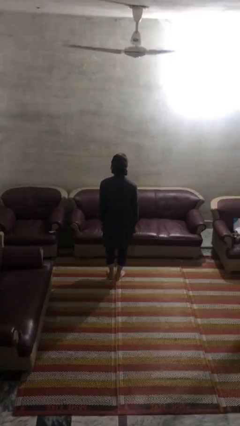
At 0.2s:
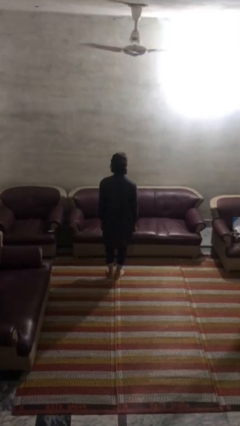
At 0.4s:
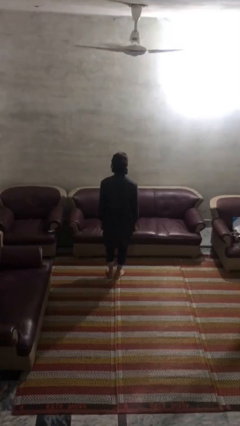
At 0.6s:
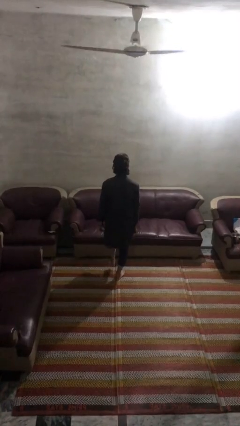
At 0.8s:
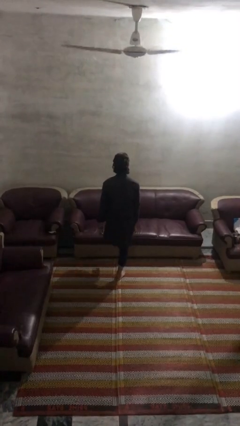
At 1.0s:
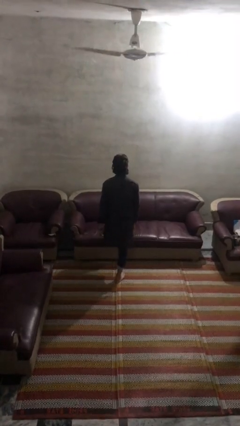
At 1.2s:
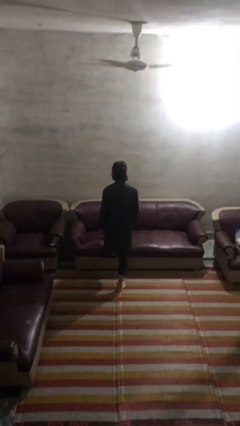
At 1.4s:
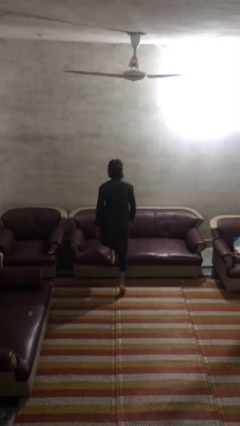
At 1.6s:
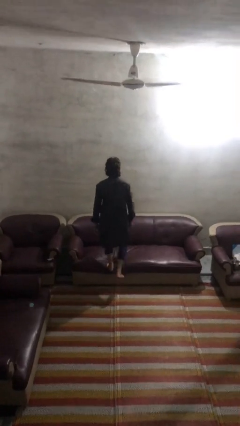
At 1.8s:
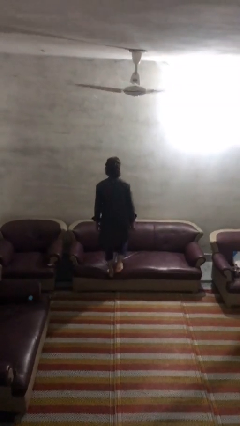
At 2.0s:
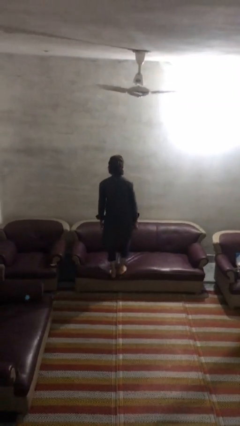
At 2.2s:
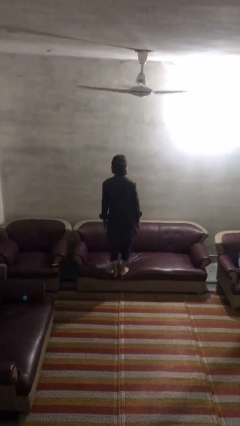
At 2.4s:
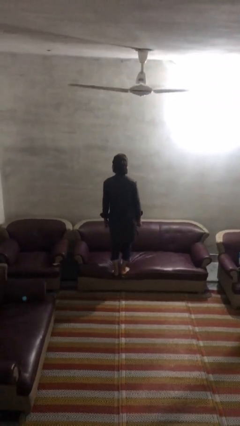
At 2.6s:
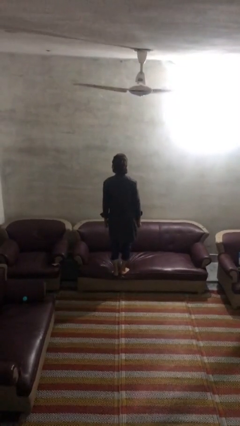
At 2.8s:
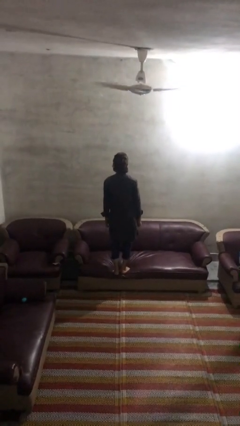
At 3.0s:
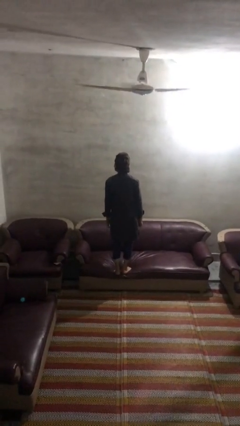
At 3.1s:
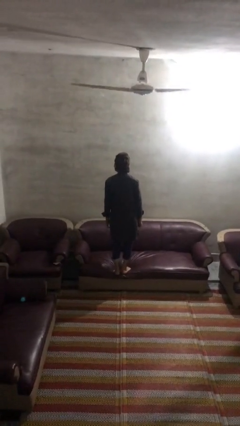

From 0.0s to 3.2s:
person climbs on couch

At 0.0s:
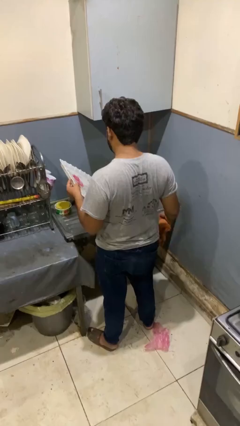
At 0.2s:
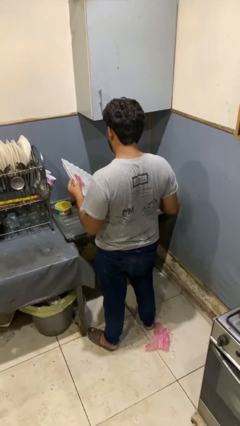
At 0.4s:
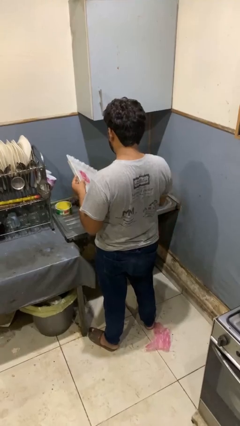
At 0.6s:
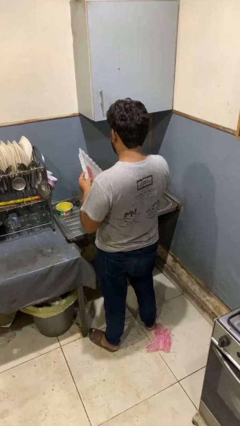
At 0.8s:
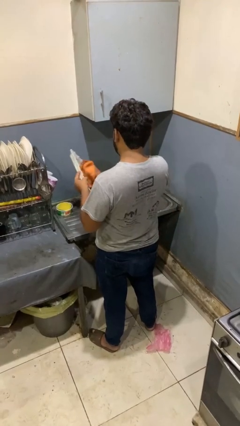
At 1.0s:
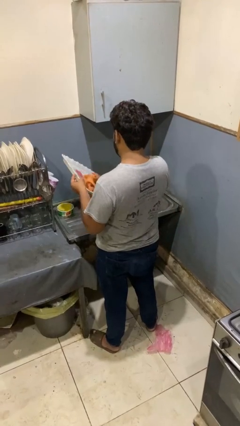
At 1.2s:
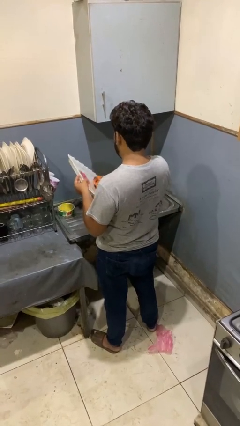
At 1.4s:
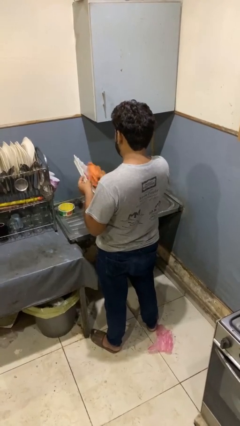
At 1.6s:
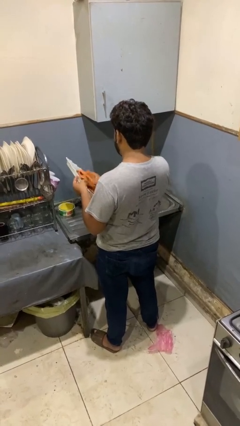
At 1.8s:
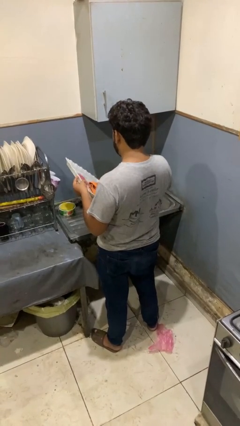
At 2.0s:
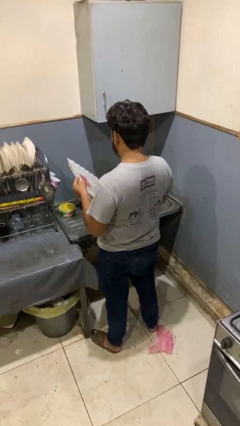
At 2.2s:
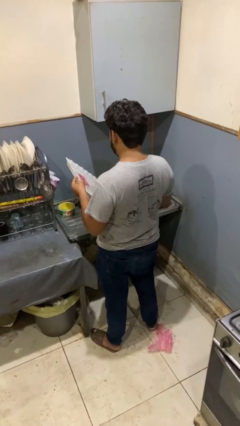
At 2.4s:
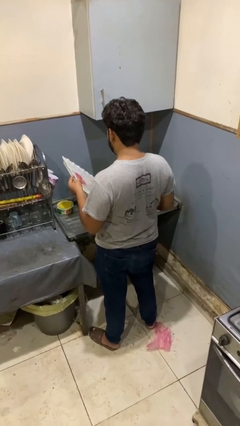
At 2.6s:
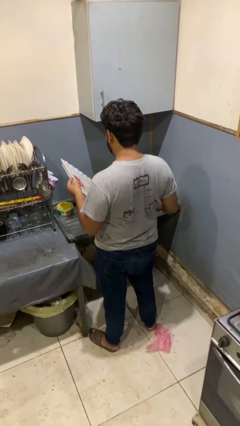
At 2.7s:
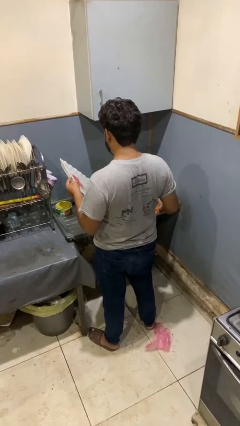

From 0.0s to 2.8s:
person dries dish

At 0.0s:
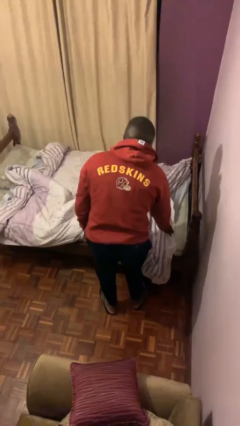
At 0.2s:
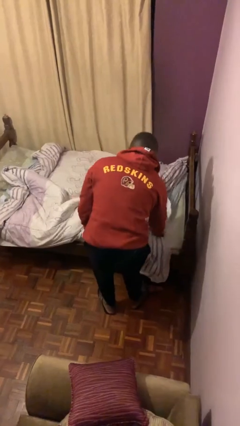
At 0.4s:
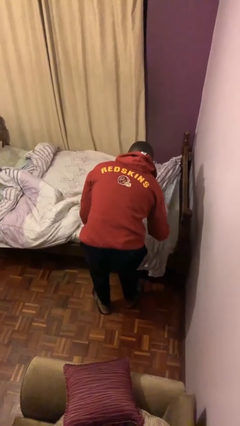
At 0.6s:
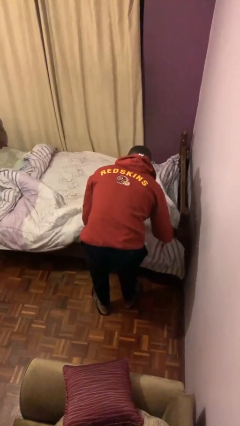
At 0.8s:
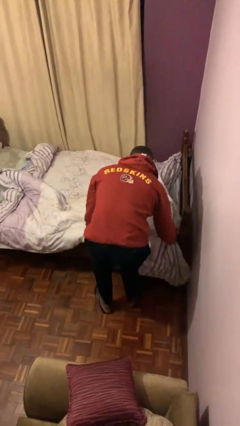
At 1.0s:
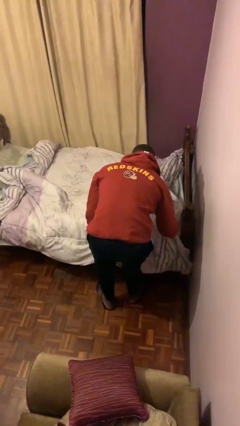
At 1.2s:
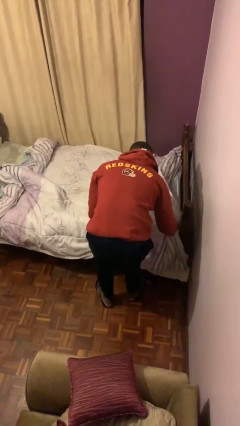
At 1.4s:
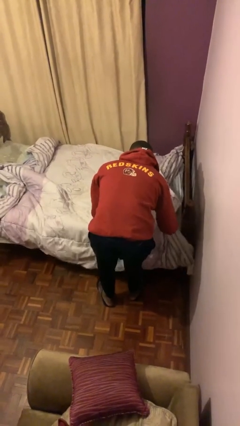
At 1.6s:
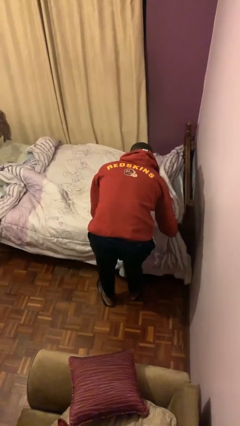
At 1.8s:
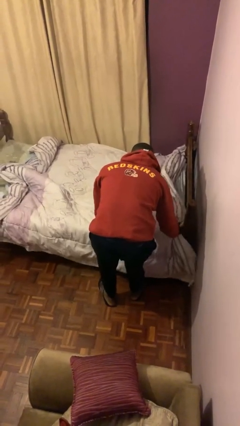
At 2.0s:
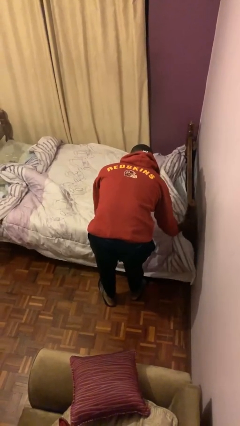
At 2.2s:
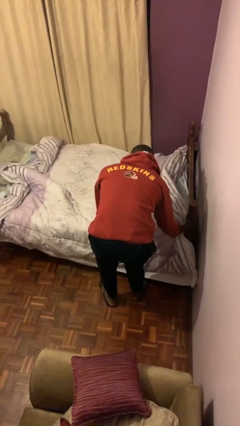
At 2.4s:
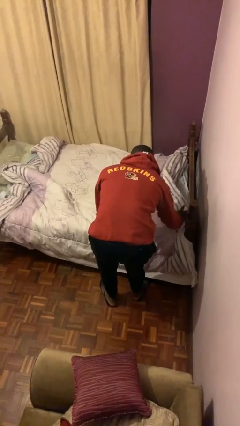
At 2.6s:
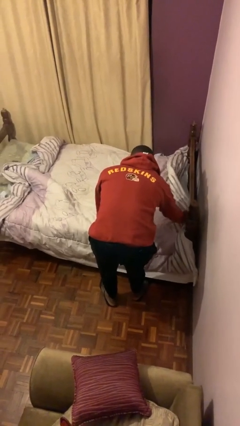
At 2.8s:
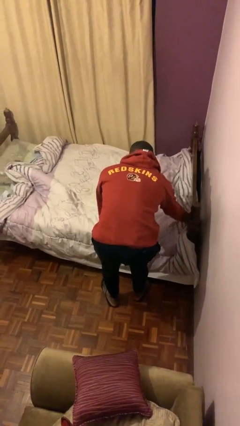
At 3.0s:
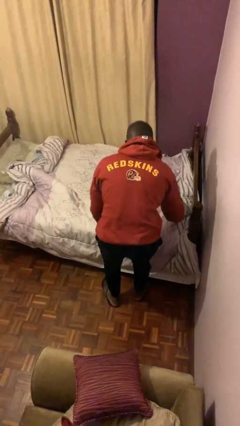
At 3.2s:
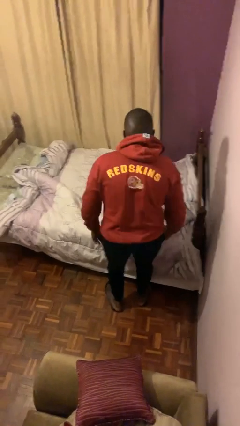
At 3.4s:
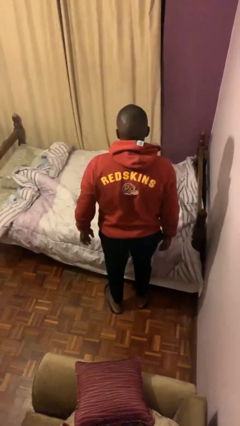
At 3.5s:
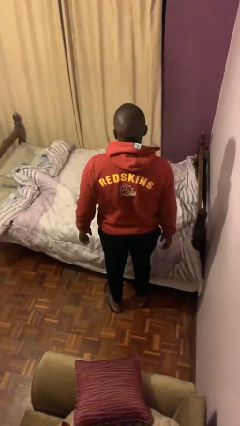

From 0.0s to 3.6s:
person makes bed

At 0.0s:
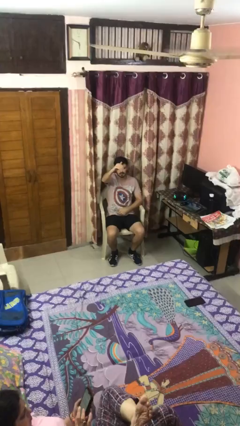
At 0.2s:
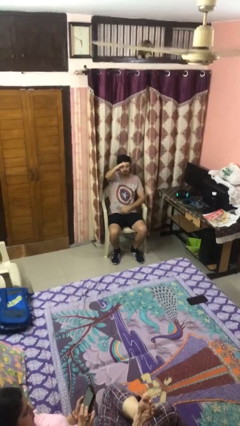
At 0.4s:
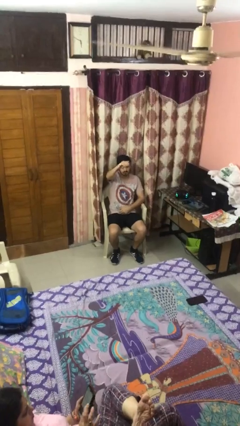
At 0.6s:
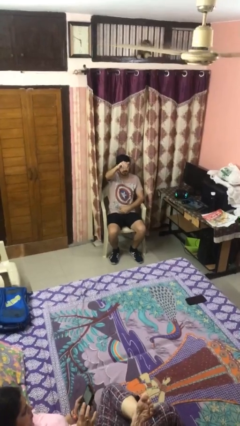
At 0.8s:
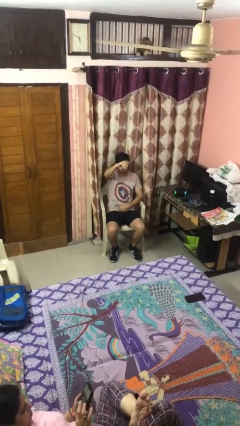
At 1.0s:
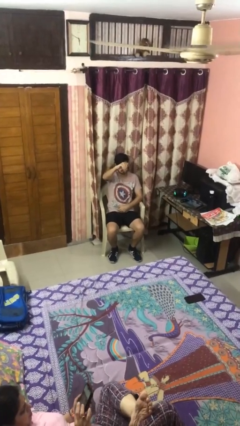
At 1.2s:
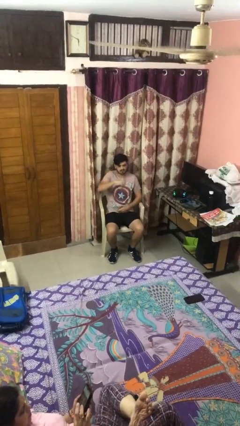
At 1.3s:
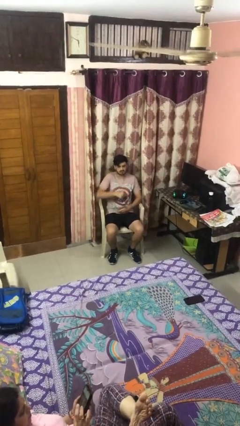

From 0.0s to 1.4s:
person gestures come here

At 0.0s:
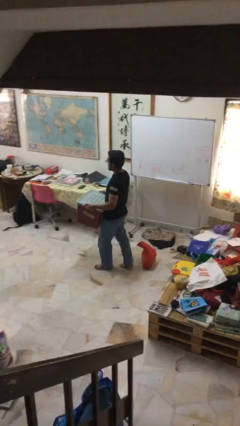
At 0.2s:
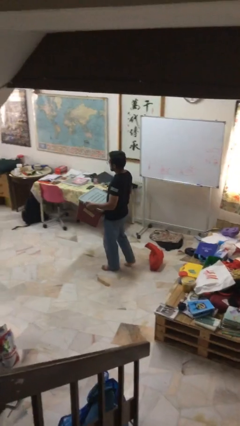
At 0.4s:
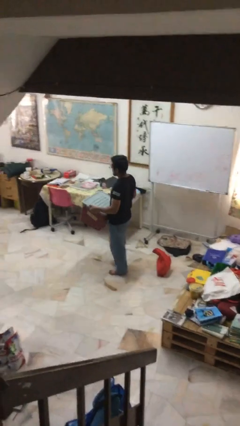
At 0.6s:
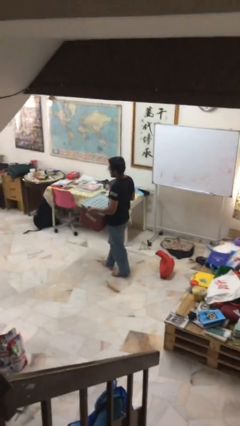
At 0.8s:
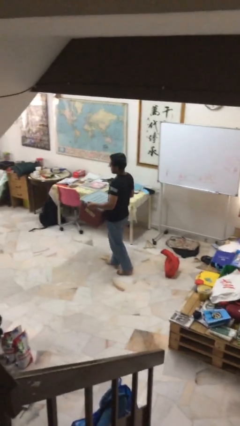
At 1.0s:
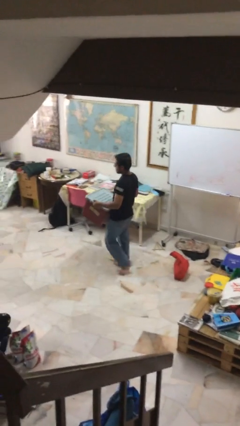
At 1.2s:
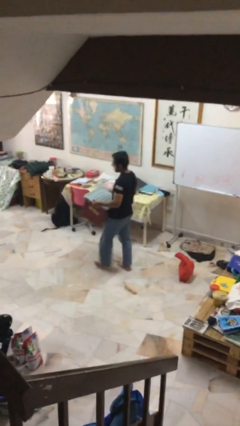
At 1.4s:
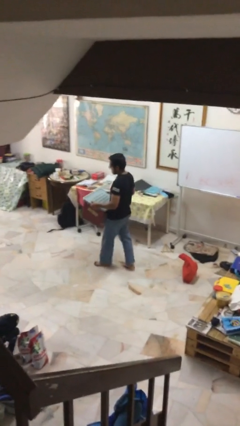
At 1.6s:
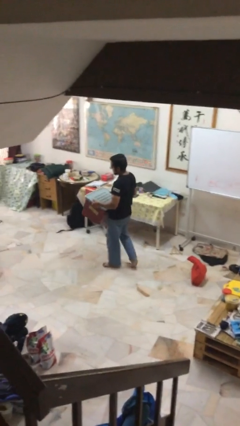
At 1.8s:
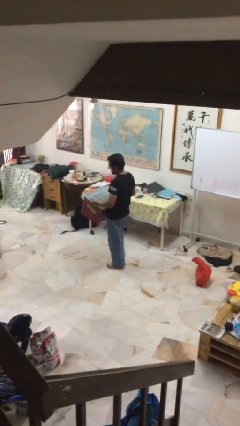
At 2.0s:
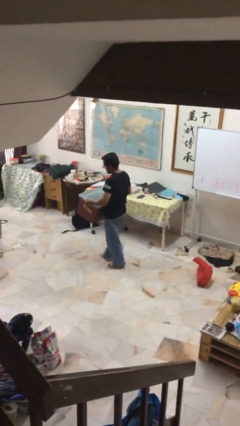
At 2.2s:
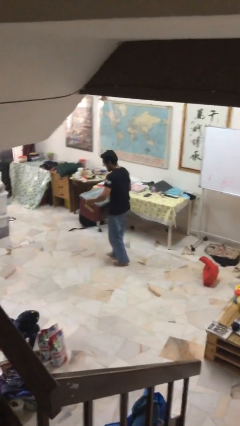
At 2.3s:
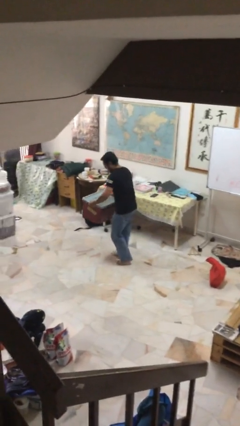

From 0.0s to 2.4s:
person carries heavy object

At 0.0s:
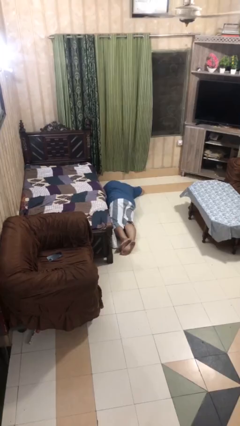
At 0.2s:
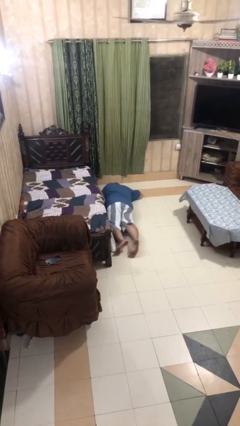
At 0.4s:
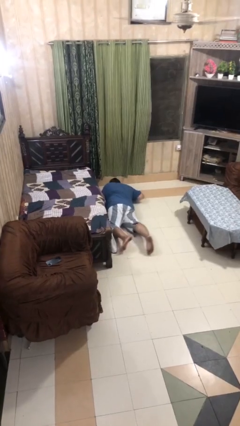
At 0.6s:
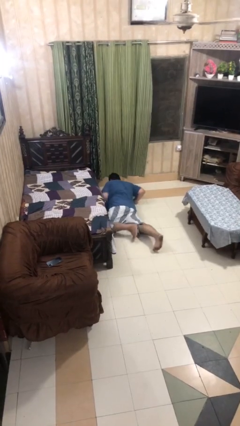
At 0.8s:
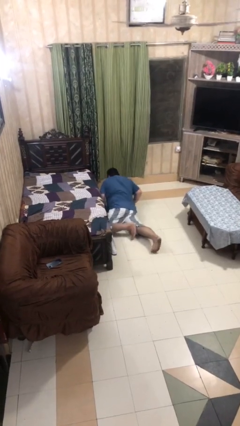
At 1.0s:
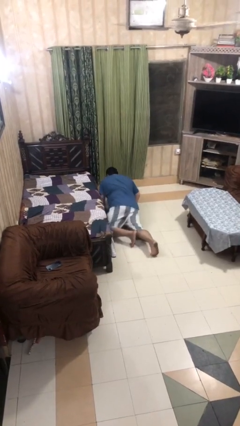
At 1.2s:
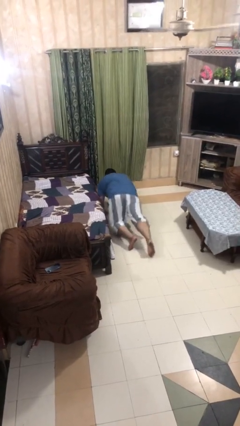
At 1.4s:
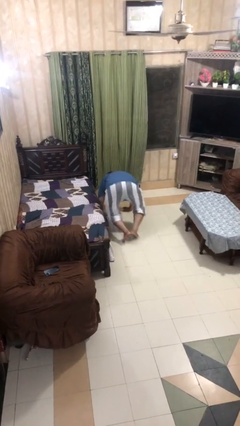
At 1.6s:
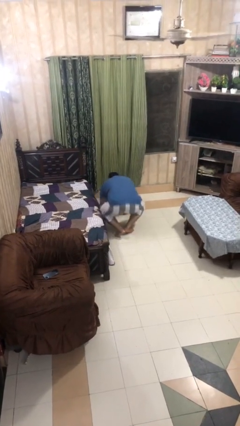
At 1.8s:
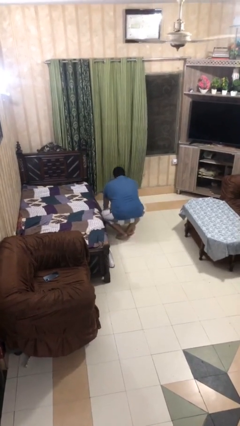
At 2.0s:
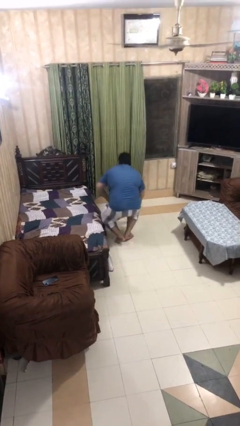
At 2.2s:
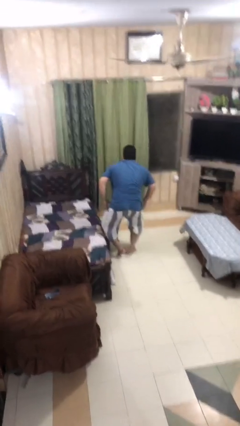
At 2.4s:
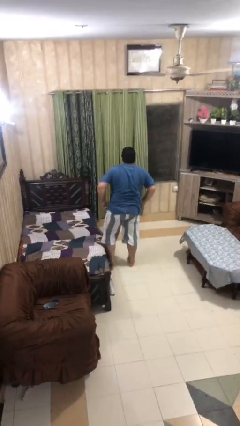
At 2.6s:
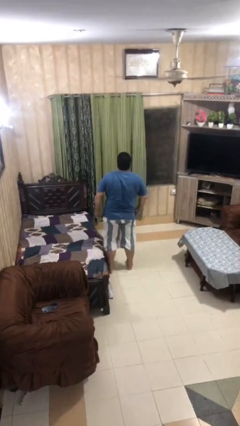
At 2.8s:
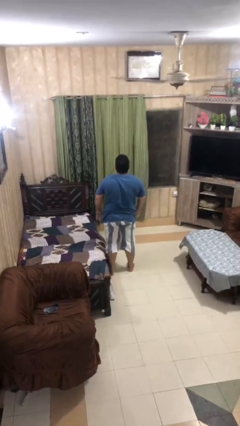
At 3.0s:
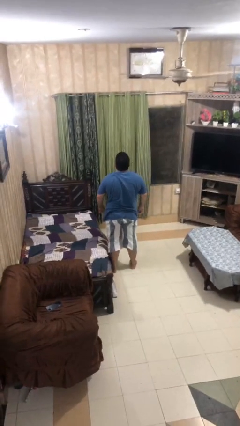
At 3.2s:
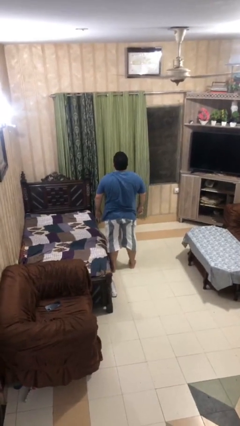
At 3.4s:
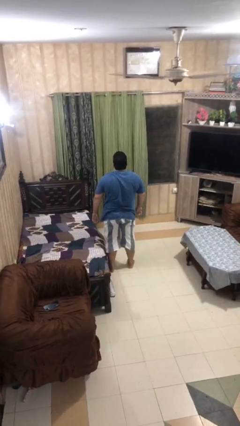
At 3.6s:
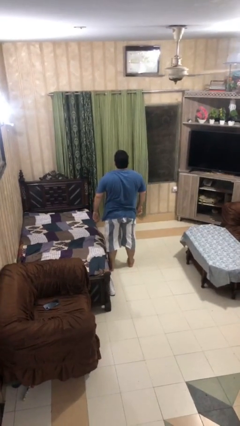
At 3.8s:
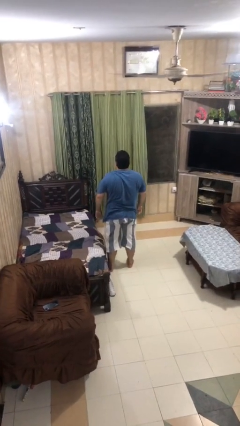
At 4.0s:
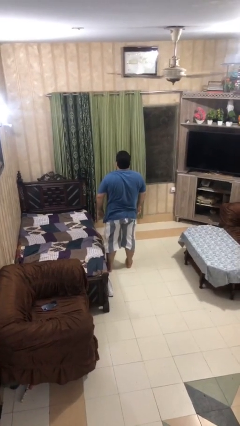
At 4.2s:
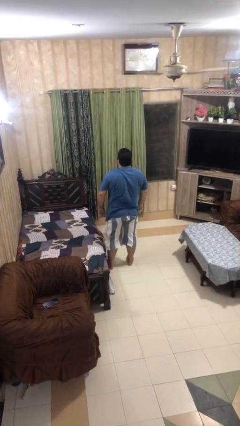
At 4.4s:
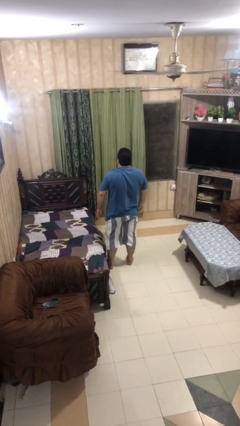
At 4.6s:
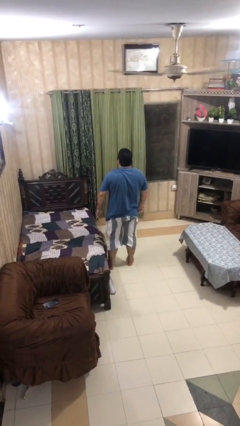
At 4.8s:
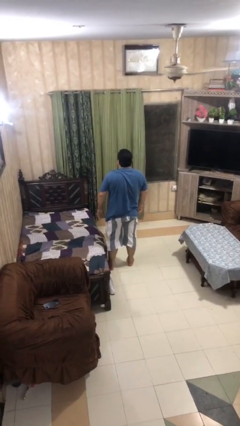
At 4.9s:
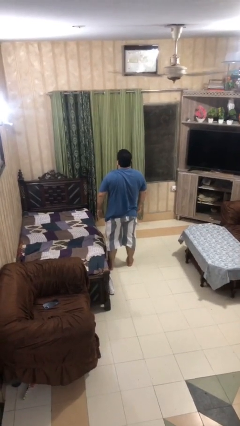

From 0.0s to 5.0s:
person stands up from floor
